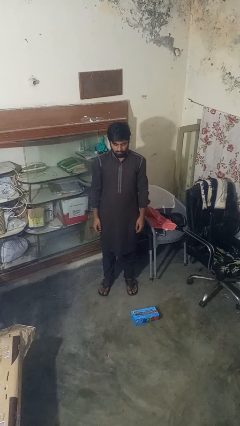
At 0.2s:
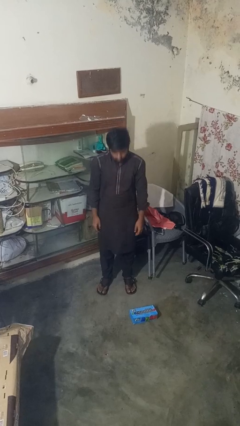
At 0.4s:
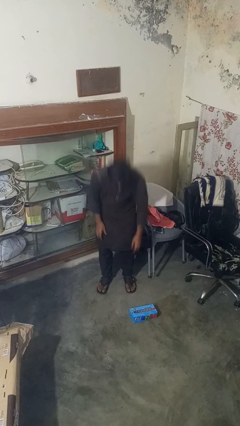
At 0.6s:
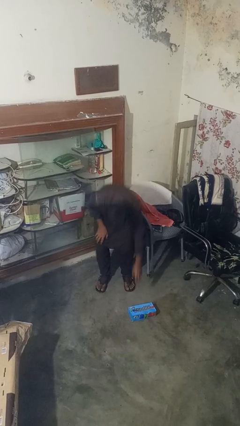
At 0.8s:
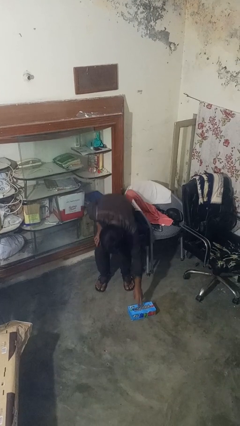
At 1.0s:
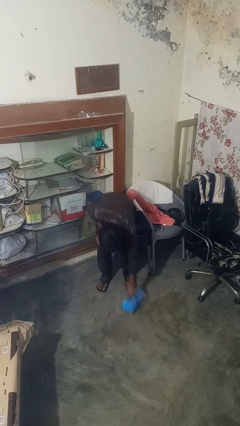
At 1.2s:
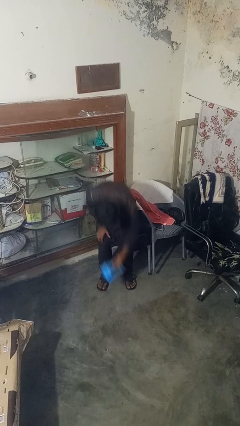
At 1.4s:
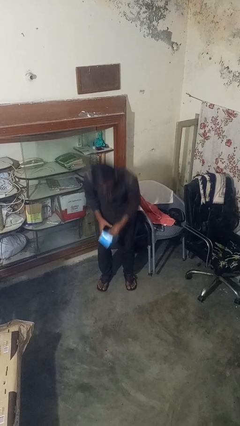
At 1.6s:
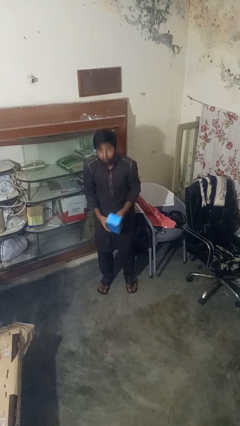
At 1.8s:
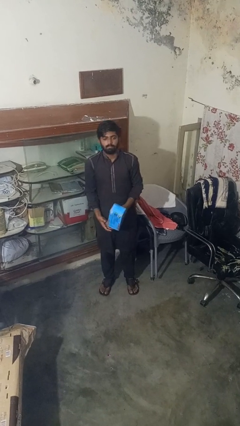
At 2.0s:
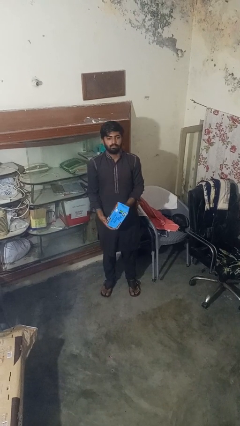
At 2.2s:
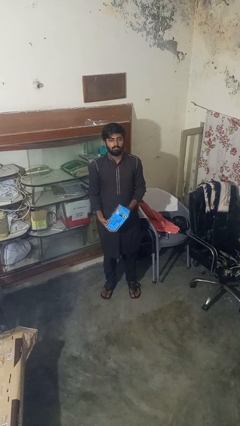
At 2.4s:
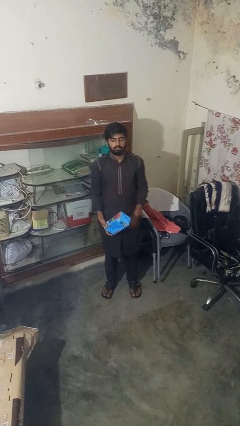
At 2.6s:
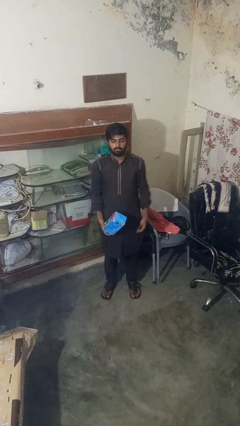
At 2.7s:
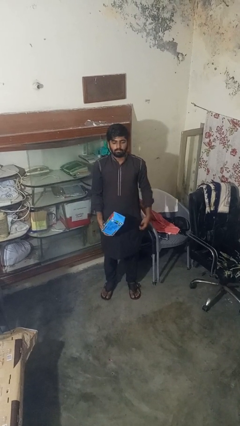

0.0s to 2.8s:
person picks up object from floor

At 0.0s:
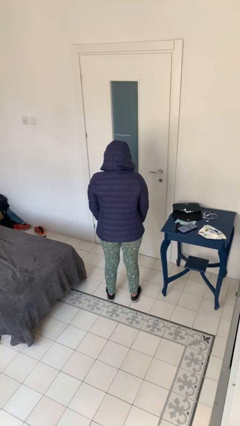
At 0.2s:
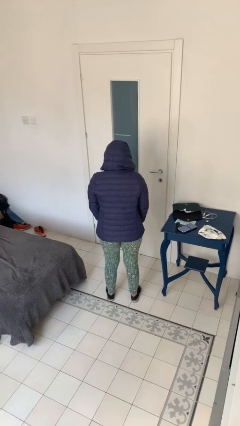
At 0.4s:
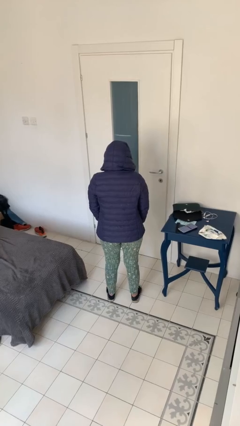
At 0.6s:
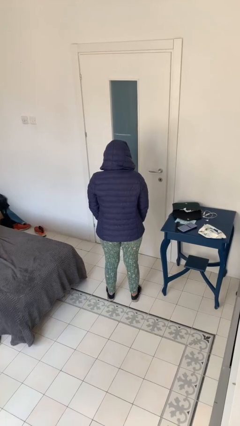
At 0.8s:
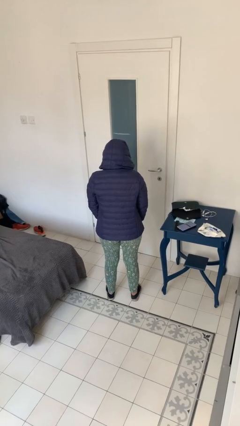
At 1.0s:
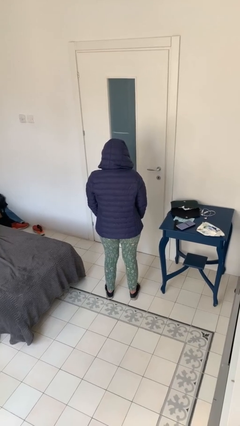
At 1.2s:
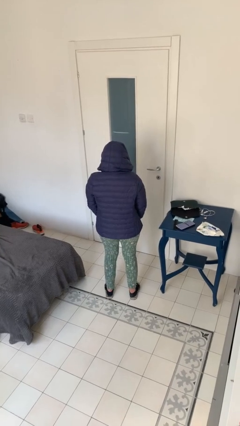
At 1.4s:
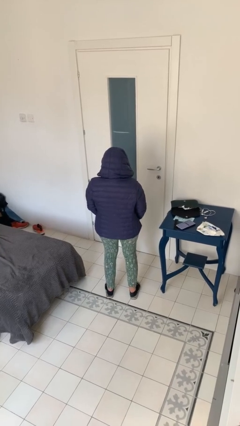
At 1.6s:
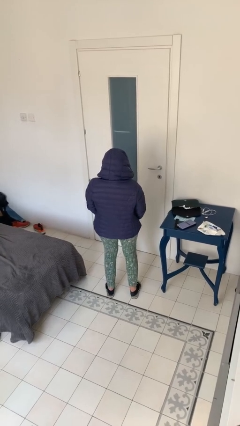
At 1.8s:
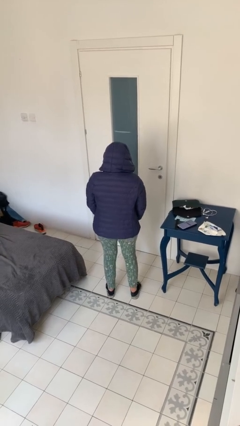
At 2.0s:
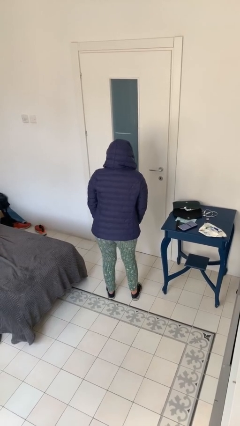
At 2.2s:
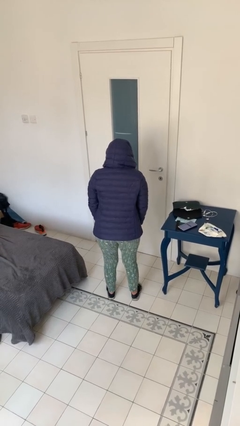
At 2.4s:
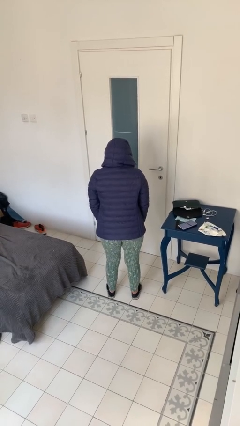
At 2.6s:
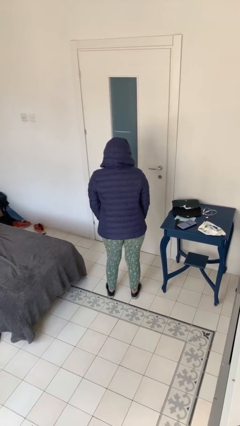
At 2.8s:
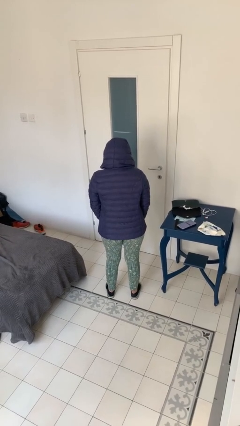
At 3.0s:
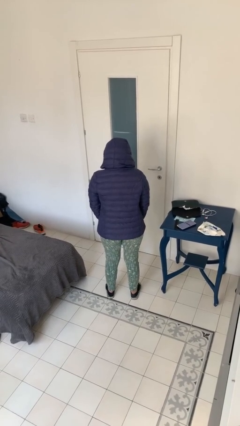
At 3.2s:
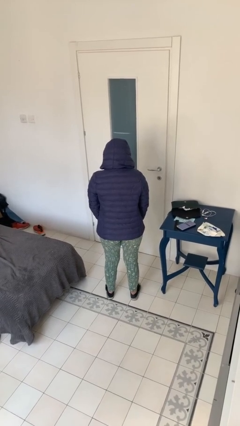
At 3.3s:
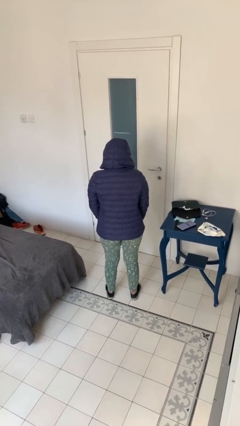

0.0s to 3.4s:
person wiggles hips

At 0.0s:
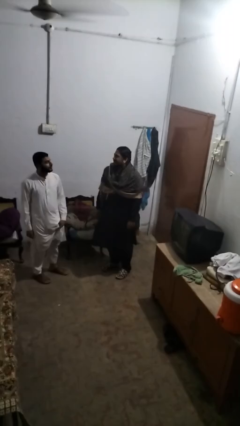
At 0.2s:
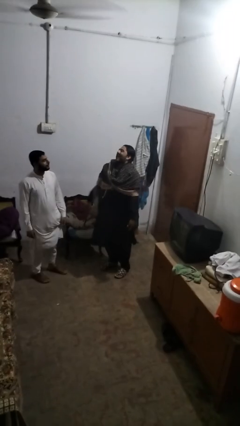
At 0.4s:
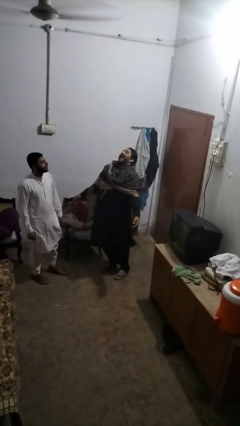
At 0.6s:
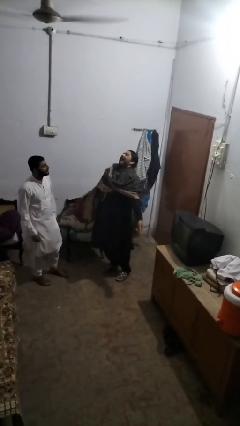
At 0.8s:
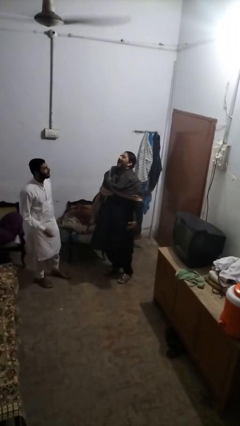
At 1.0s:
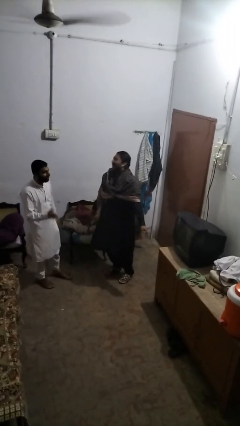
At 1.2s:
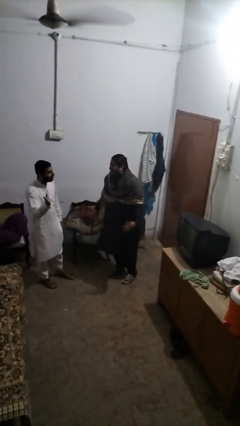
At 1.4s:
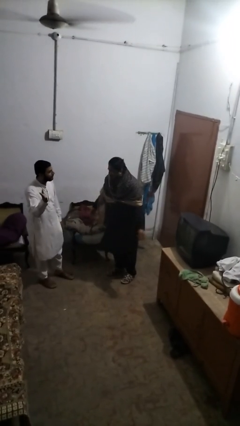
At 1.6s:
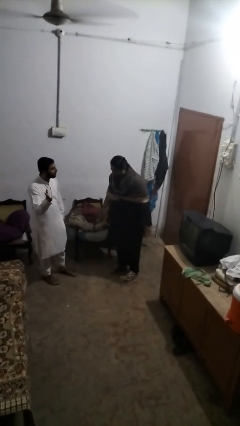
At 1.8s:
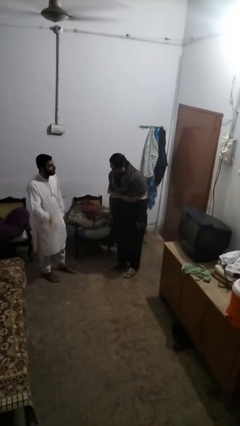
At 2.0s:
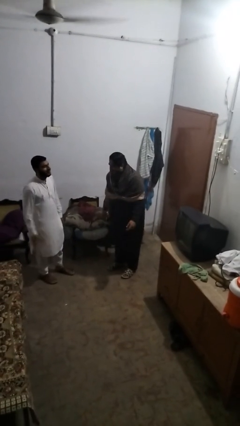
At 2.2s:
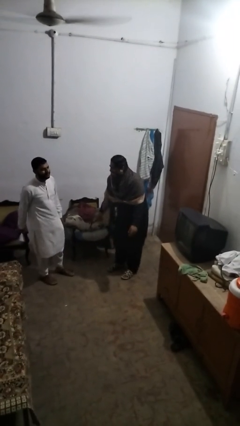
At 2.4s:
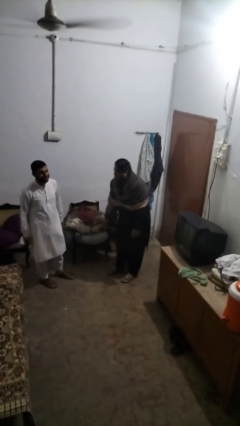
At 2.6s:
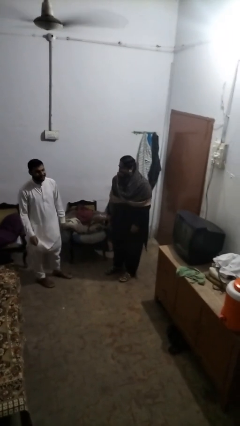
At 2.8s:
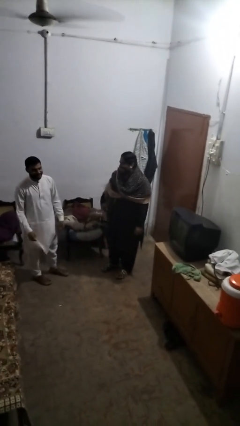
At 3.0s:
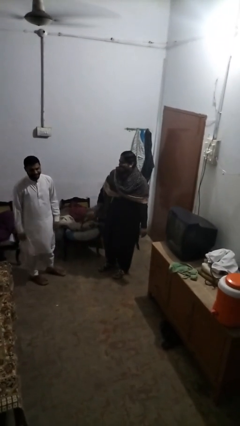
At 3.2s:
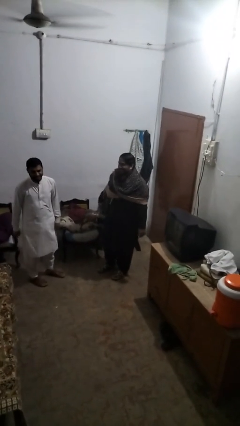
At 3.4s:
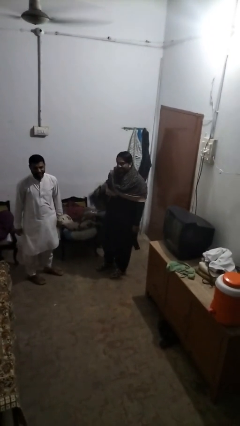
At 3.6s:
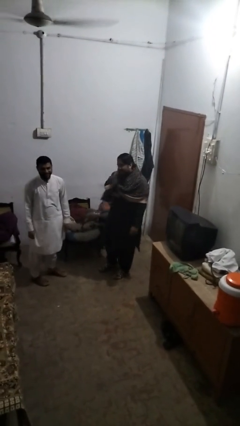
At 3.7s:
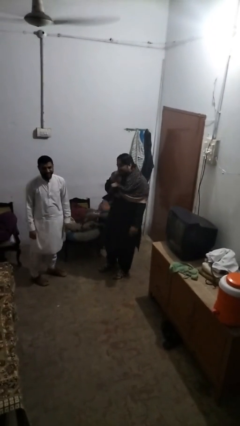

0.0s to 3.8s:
person laughs with person

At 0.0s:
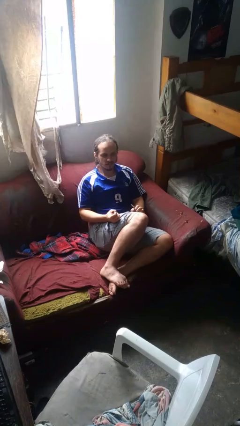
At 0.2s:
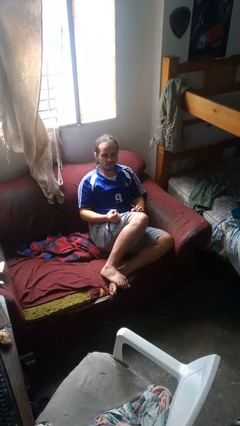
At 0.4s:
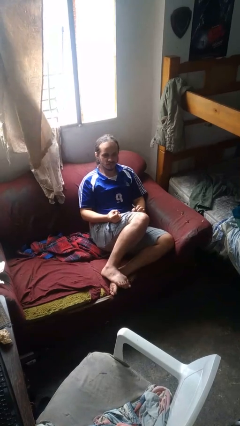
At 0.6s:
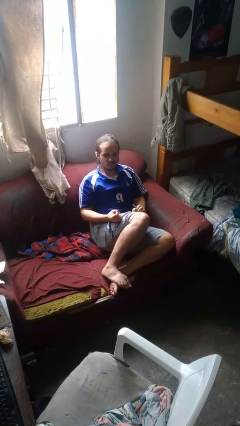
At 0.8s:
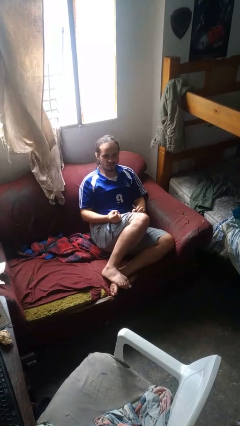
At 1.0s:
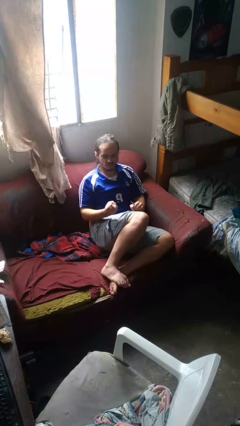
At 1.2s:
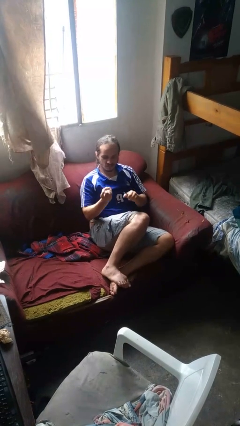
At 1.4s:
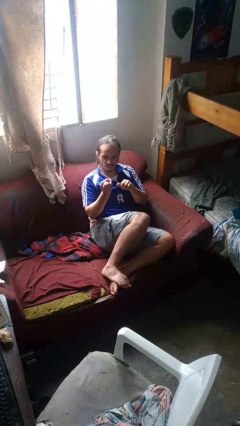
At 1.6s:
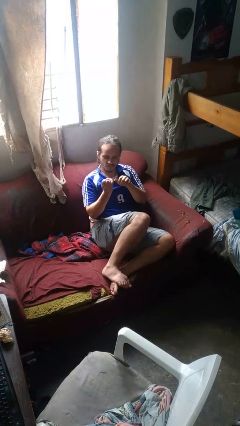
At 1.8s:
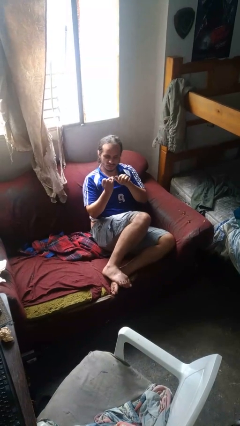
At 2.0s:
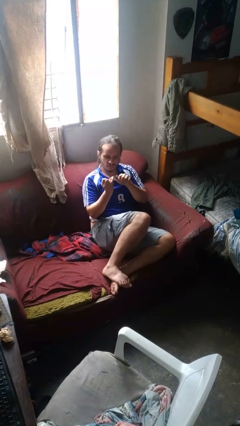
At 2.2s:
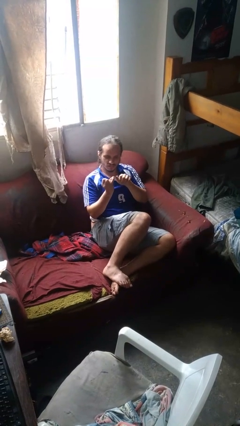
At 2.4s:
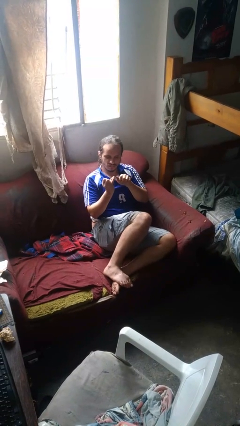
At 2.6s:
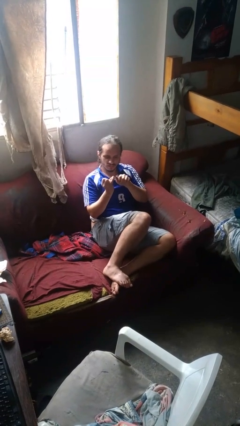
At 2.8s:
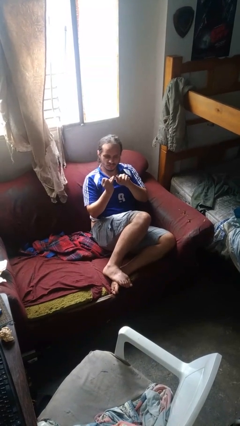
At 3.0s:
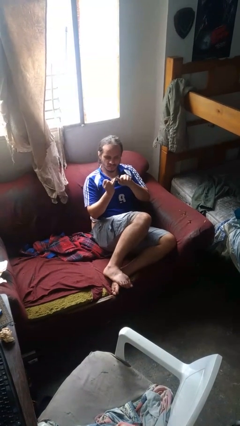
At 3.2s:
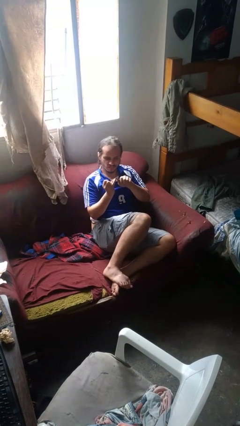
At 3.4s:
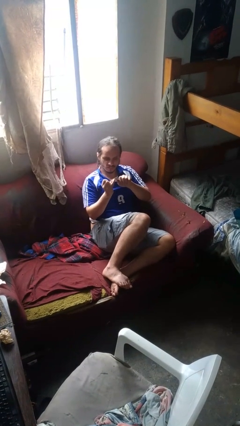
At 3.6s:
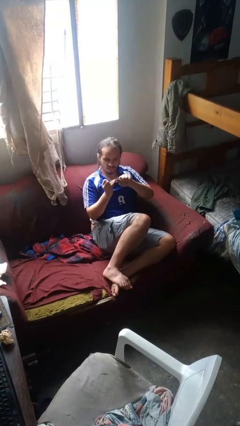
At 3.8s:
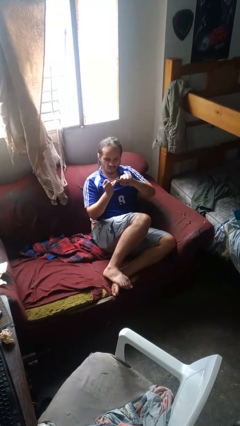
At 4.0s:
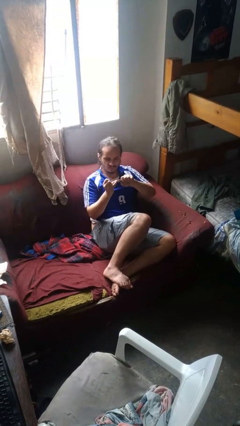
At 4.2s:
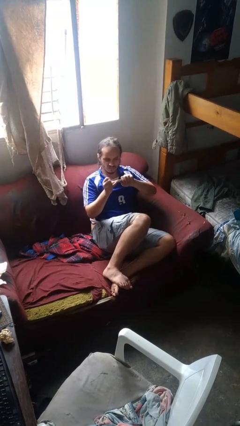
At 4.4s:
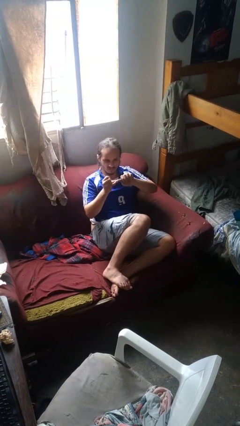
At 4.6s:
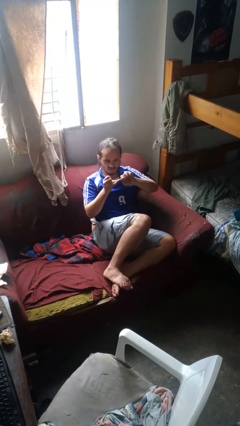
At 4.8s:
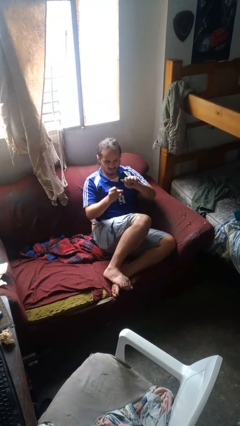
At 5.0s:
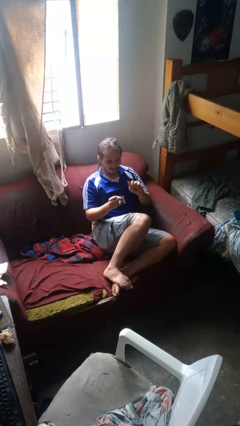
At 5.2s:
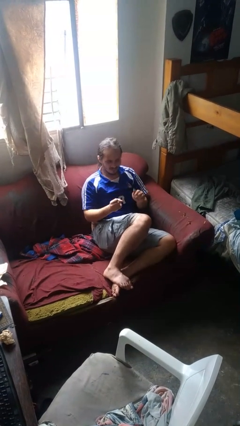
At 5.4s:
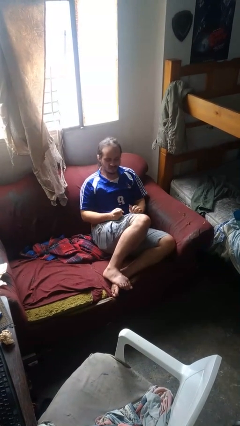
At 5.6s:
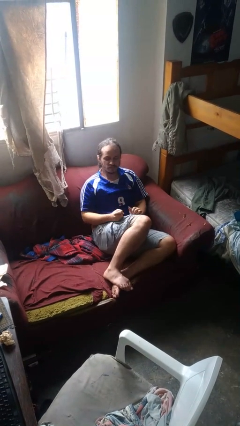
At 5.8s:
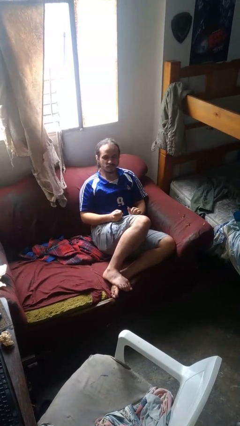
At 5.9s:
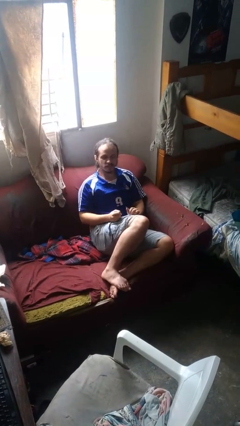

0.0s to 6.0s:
person clips fingernails

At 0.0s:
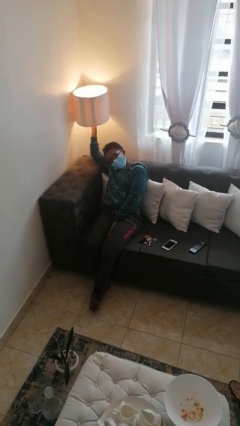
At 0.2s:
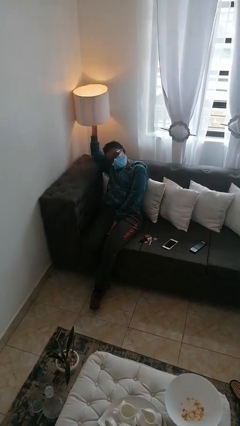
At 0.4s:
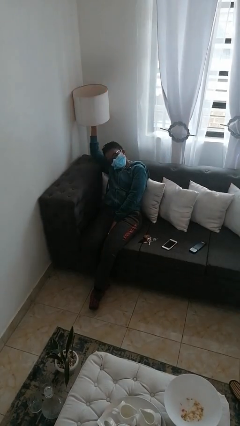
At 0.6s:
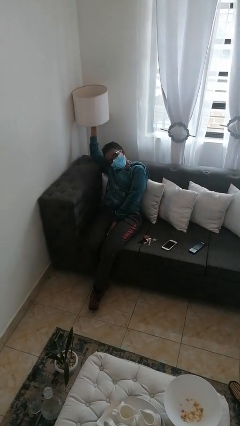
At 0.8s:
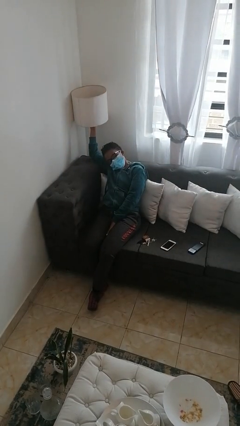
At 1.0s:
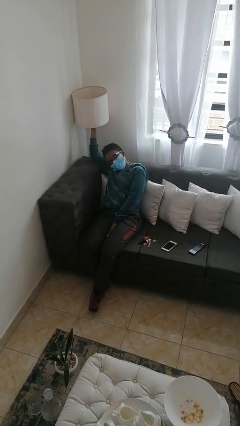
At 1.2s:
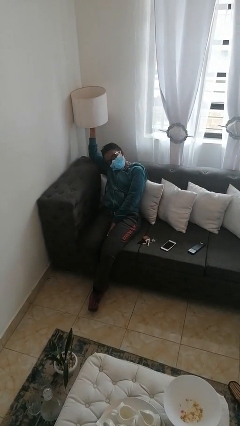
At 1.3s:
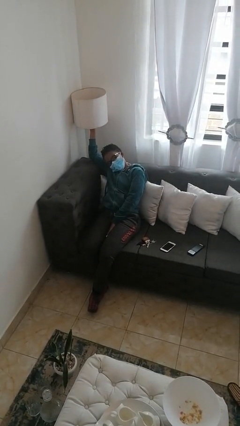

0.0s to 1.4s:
person turns off lamp

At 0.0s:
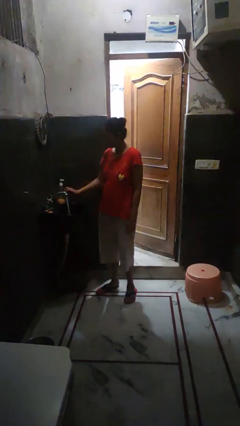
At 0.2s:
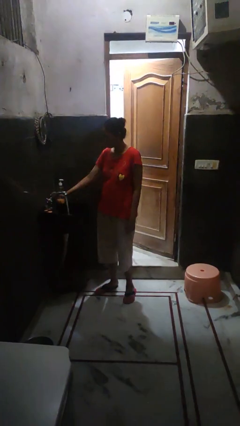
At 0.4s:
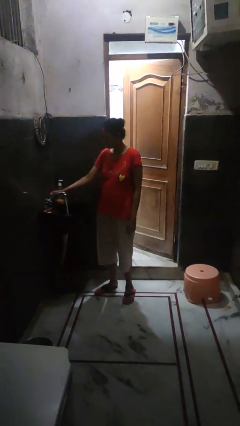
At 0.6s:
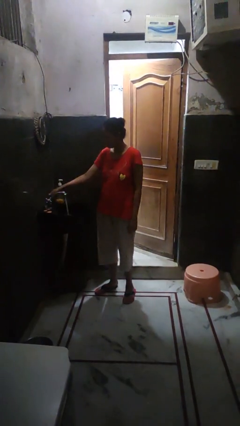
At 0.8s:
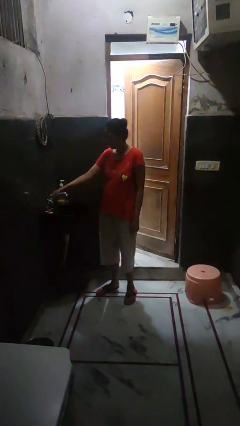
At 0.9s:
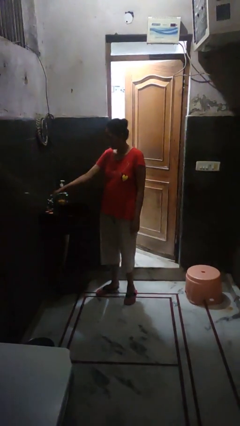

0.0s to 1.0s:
person turns off faucet
